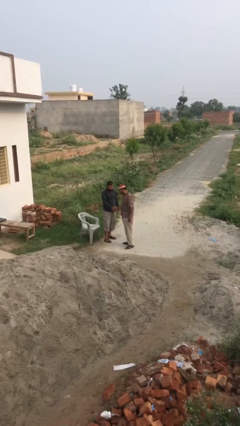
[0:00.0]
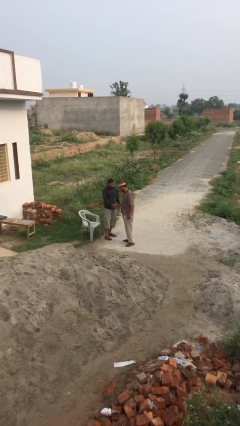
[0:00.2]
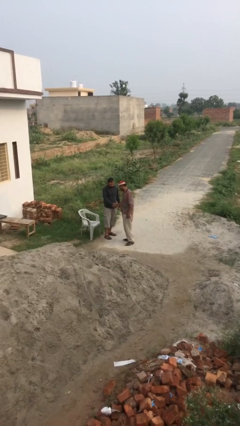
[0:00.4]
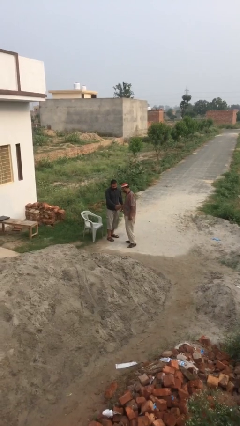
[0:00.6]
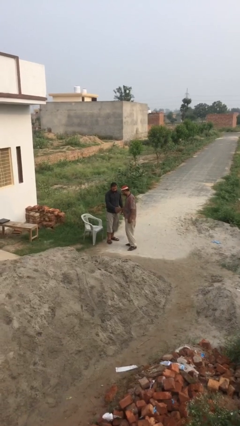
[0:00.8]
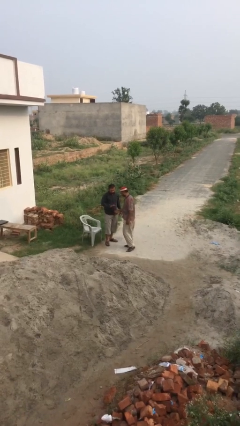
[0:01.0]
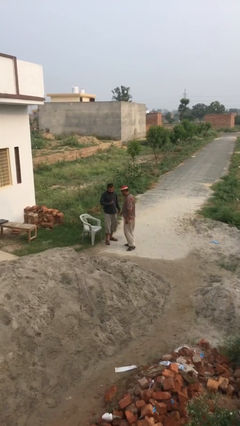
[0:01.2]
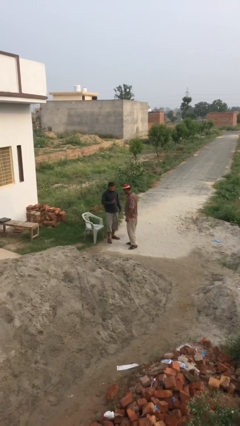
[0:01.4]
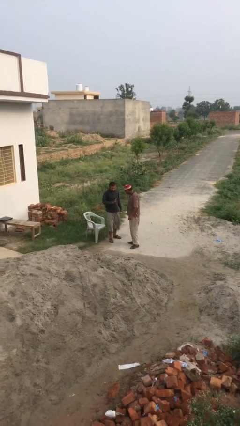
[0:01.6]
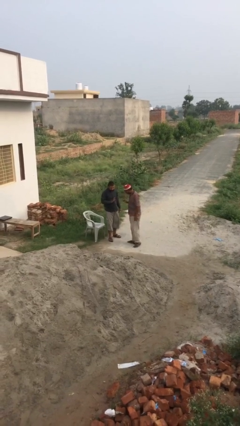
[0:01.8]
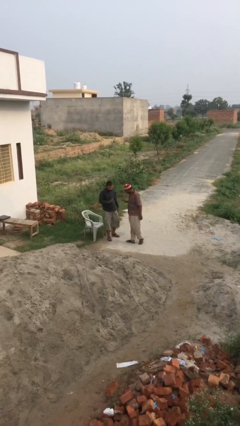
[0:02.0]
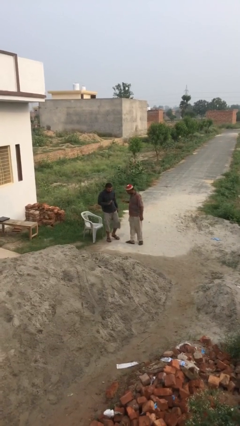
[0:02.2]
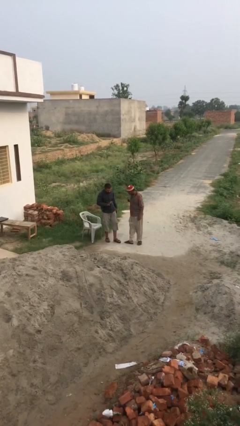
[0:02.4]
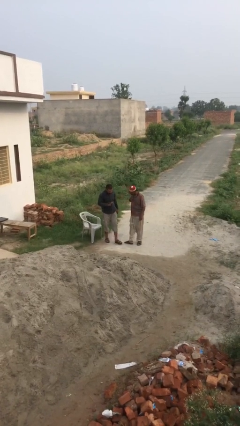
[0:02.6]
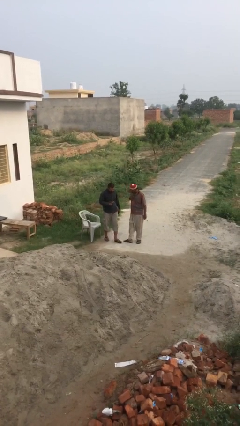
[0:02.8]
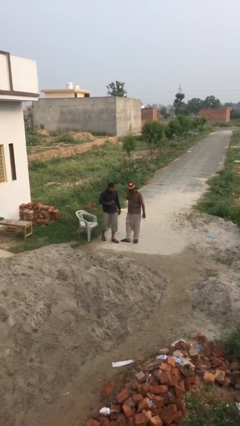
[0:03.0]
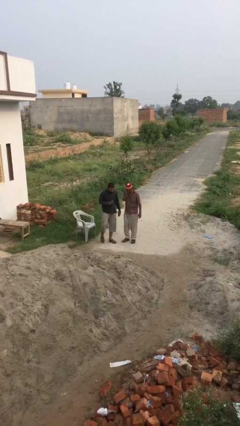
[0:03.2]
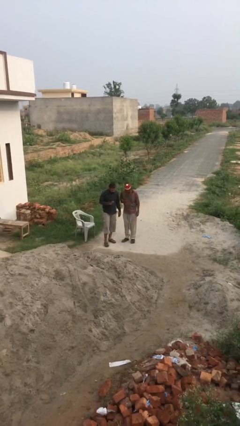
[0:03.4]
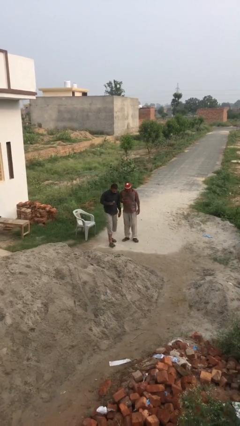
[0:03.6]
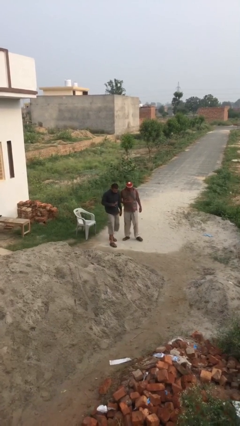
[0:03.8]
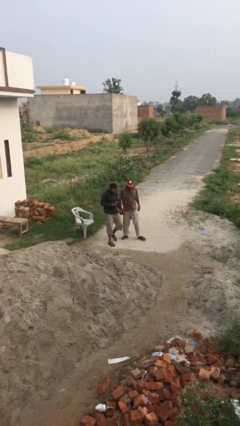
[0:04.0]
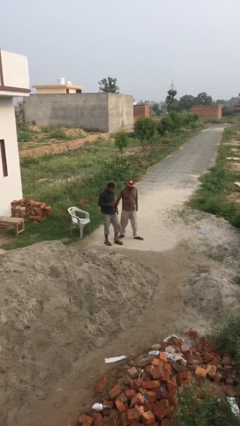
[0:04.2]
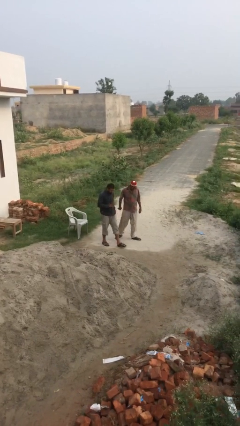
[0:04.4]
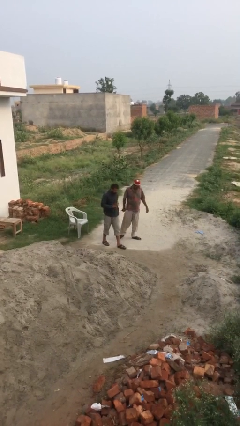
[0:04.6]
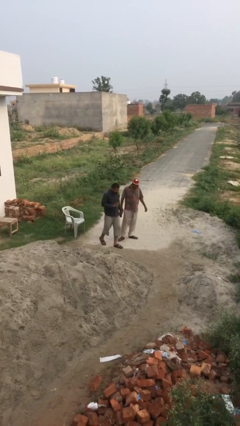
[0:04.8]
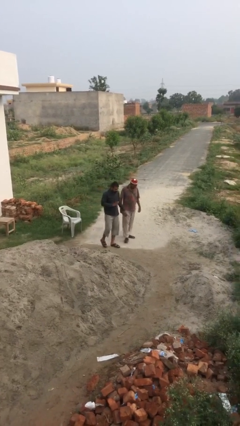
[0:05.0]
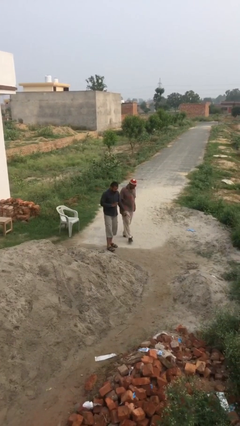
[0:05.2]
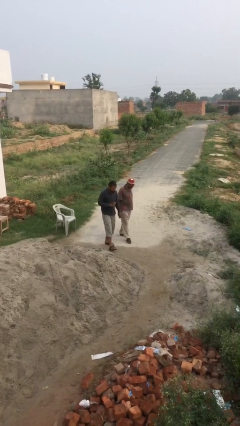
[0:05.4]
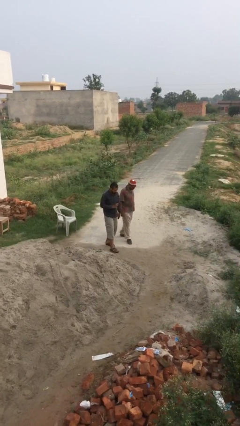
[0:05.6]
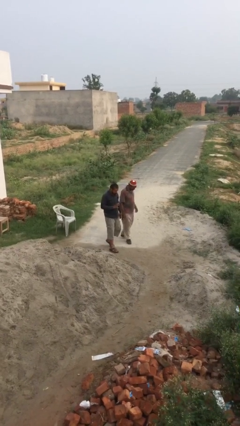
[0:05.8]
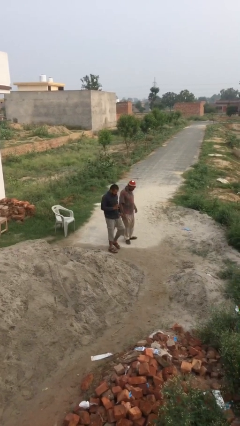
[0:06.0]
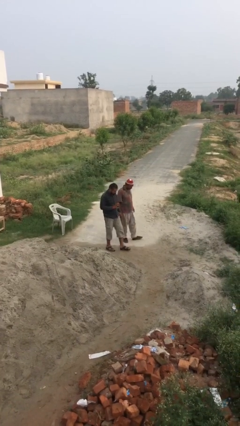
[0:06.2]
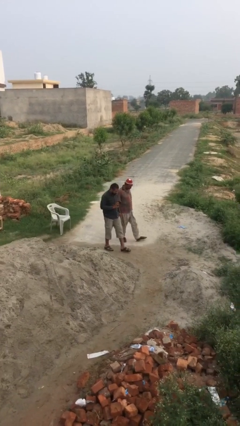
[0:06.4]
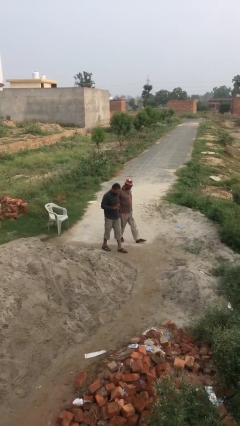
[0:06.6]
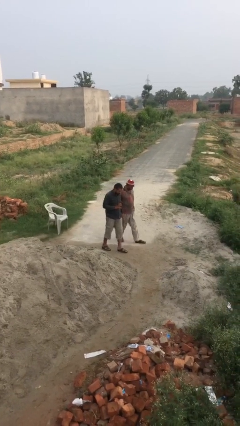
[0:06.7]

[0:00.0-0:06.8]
person talks to person

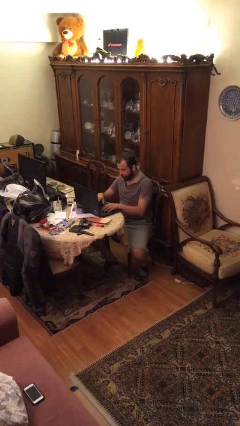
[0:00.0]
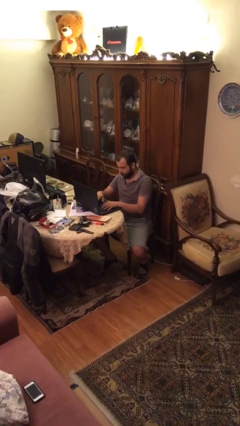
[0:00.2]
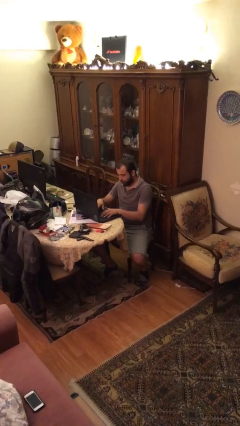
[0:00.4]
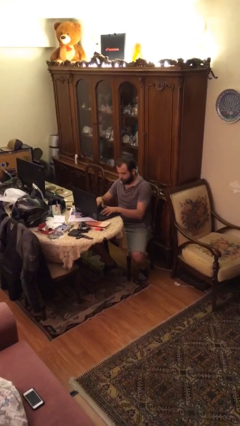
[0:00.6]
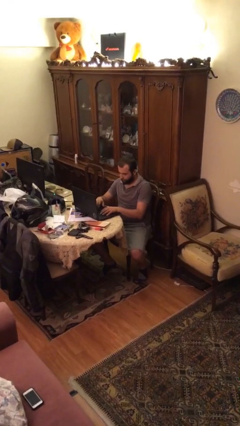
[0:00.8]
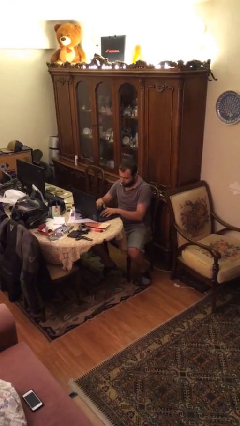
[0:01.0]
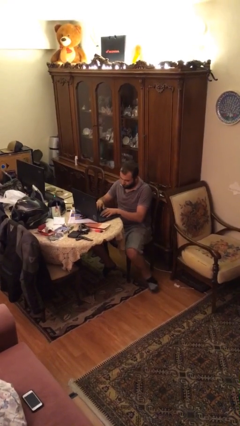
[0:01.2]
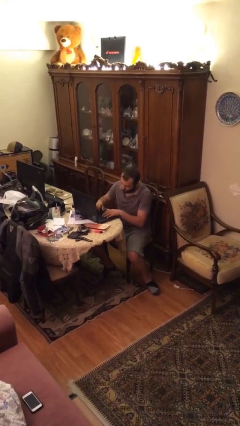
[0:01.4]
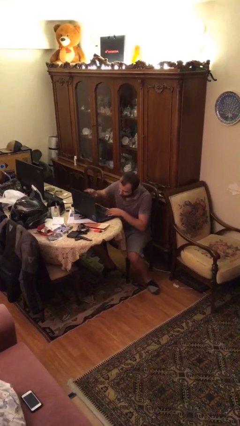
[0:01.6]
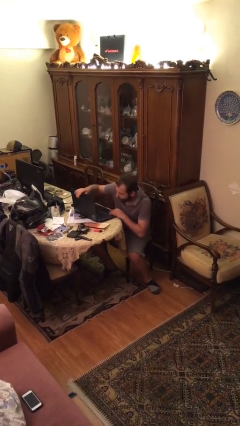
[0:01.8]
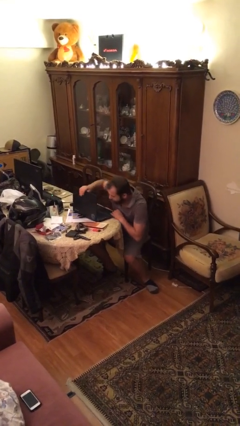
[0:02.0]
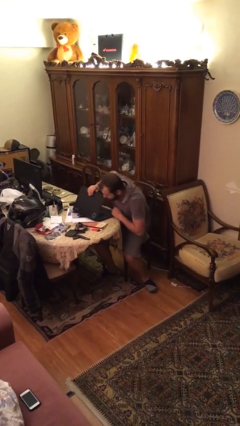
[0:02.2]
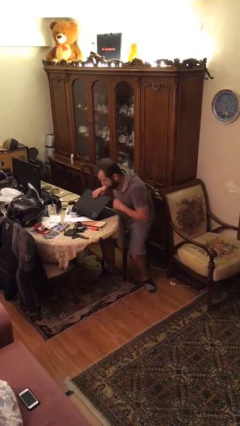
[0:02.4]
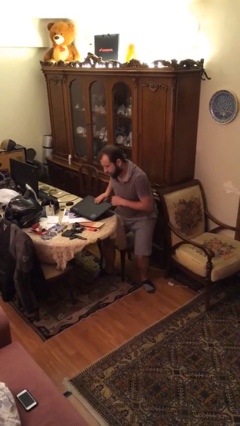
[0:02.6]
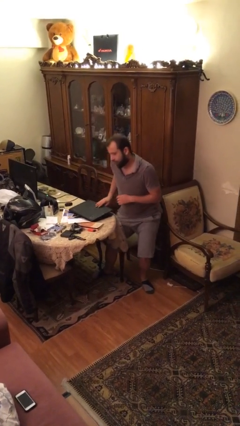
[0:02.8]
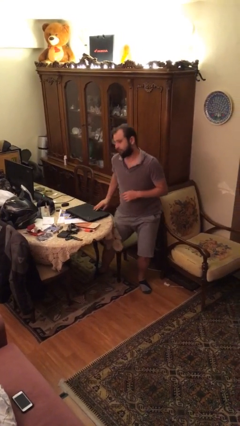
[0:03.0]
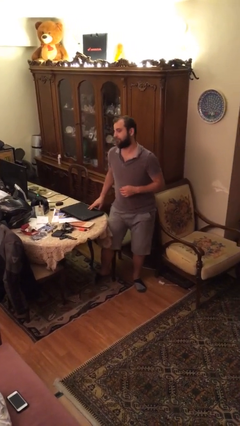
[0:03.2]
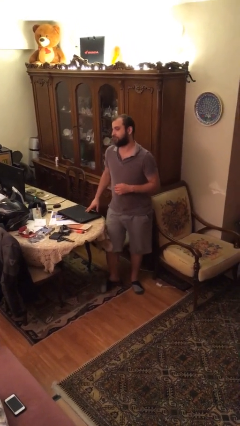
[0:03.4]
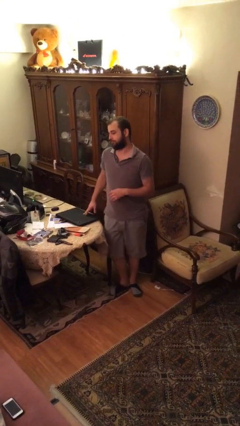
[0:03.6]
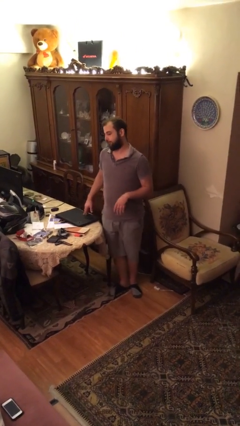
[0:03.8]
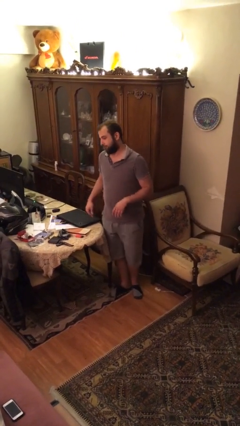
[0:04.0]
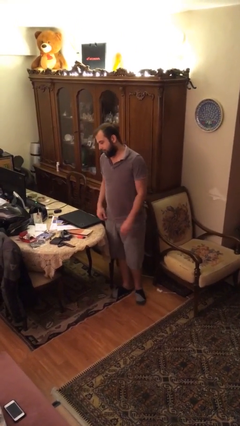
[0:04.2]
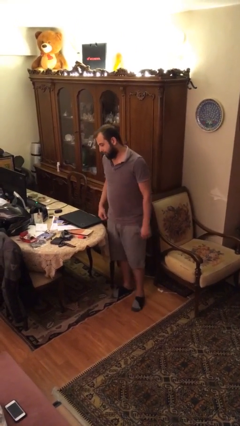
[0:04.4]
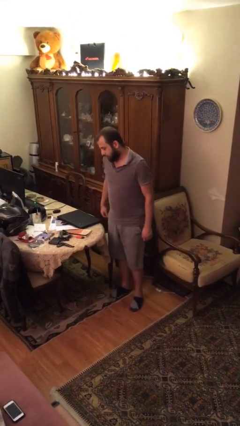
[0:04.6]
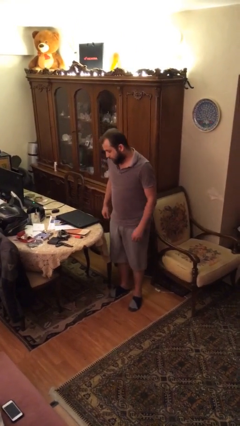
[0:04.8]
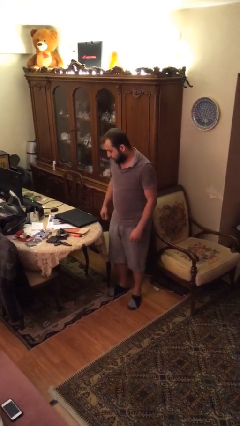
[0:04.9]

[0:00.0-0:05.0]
person stands up

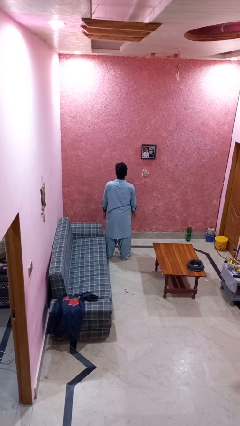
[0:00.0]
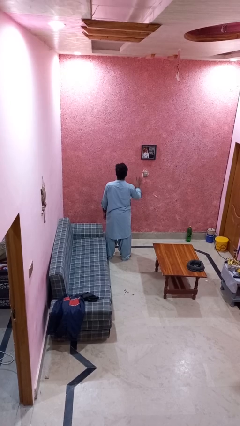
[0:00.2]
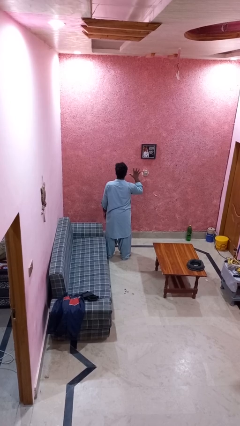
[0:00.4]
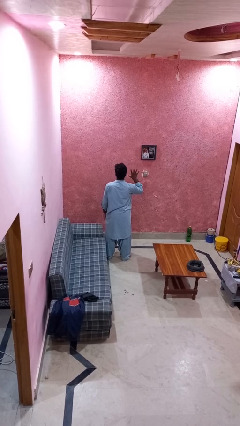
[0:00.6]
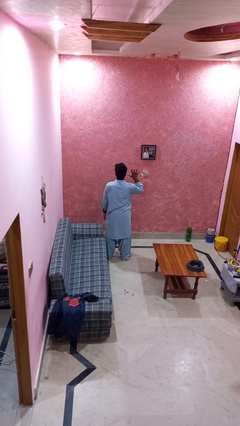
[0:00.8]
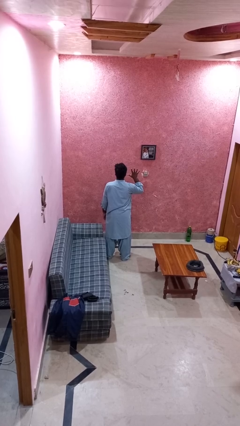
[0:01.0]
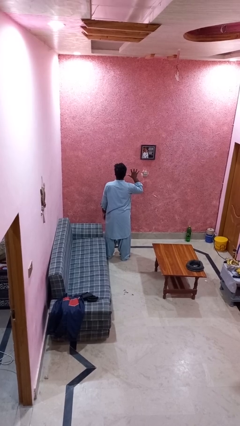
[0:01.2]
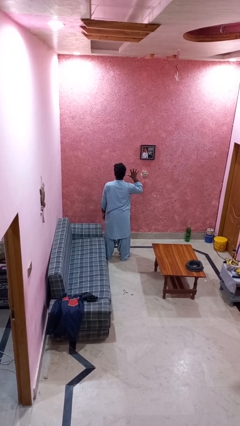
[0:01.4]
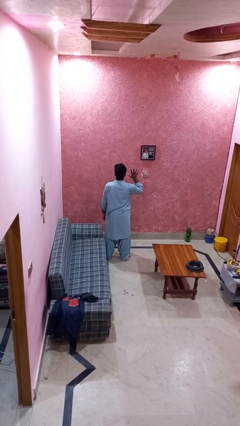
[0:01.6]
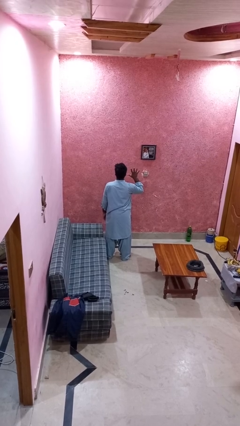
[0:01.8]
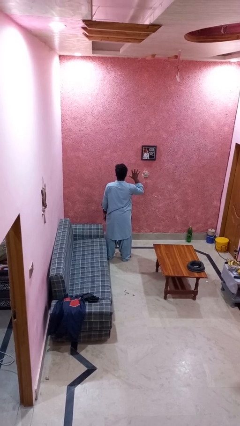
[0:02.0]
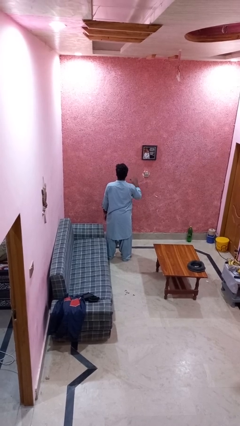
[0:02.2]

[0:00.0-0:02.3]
person gestures number five

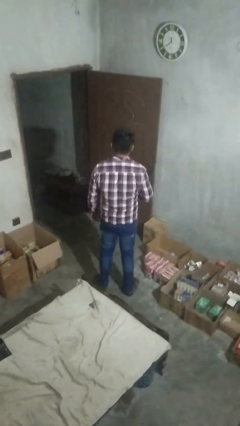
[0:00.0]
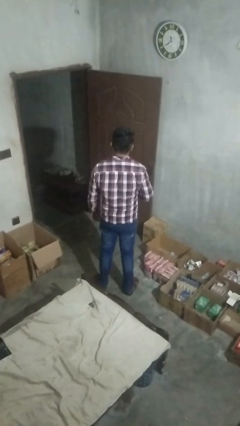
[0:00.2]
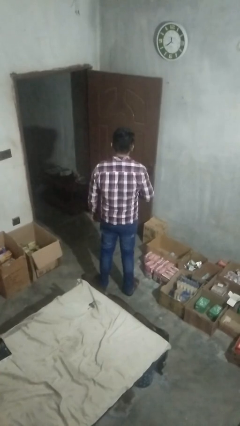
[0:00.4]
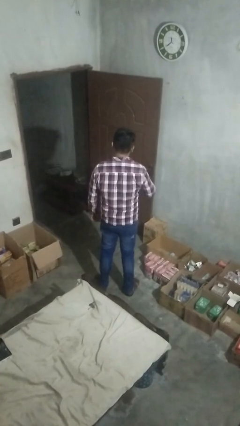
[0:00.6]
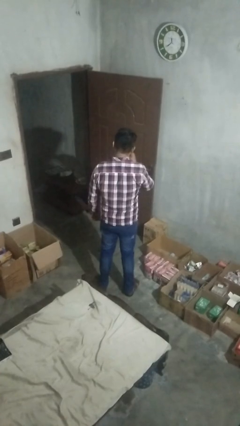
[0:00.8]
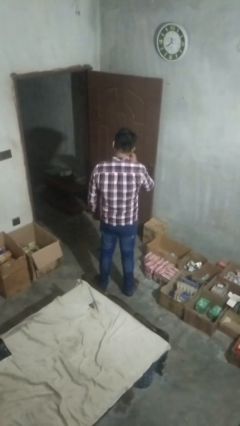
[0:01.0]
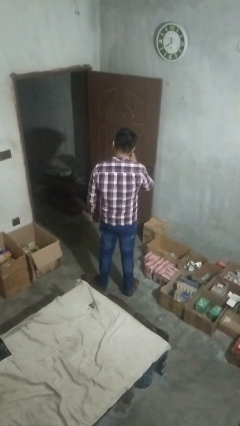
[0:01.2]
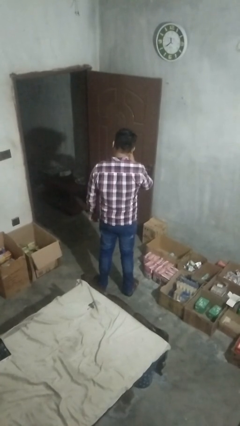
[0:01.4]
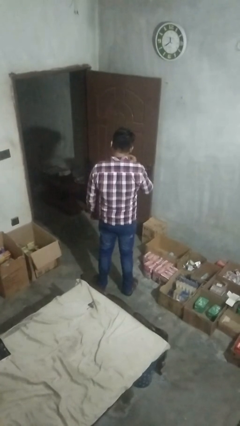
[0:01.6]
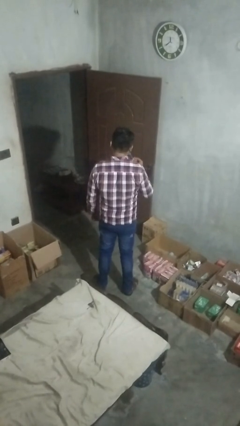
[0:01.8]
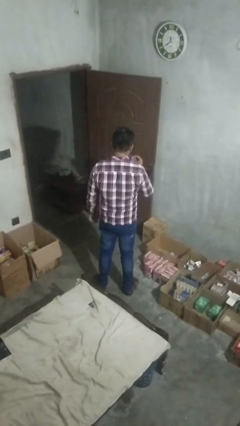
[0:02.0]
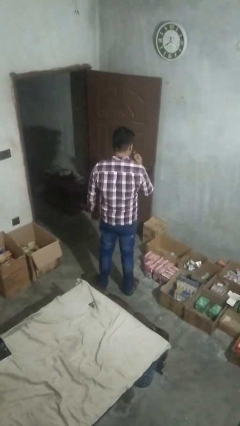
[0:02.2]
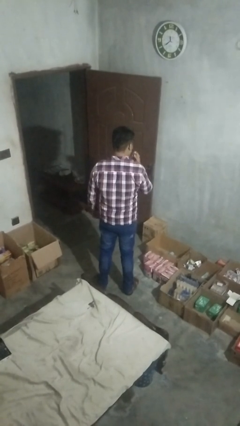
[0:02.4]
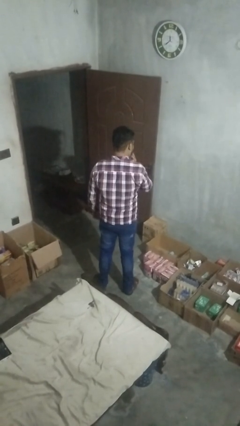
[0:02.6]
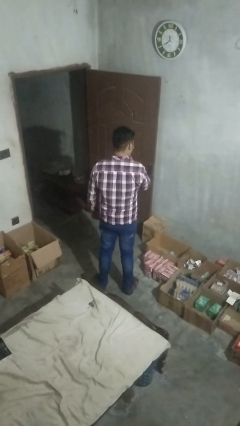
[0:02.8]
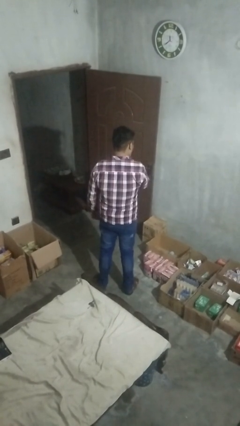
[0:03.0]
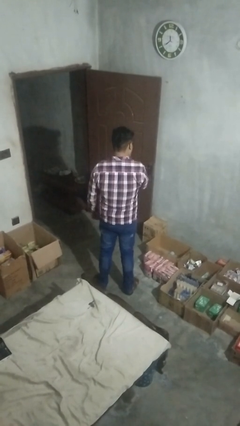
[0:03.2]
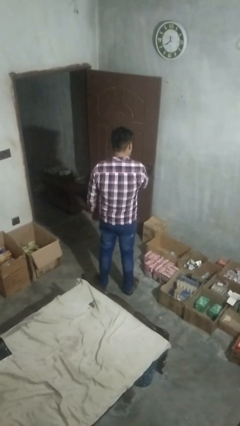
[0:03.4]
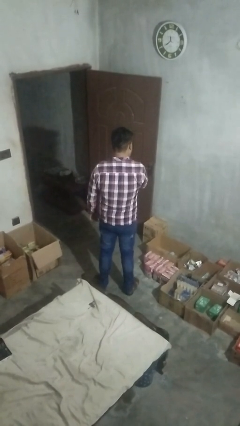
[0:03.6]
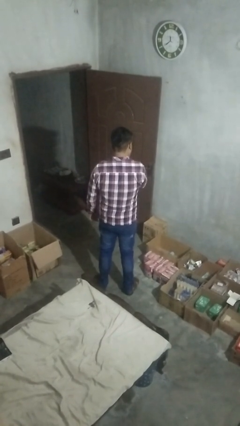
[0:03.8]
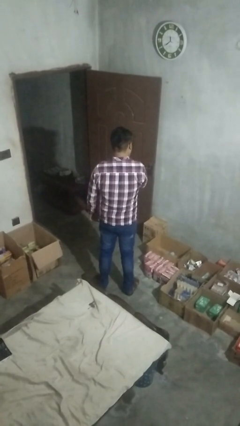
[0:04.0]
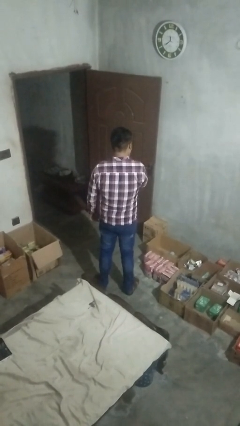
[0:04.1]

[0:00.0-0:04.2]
person brushes teeth
